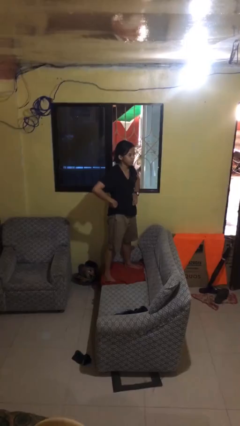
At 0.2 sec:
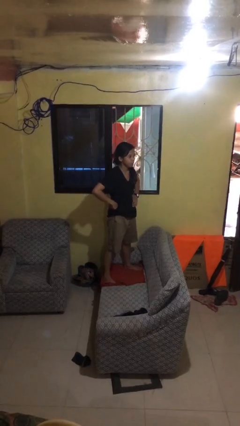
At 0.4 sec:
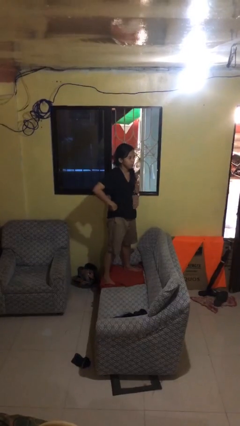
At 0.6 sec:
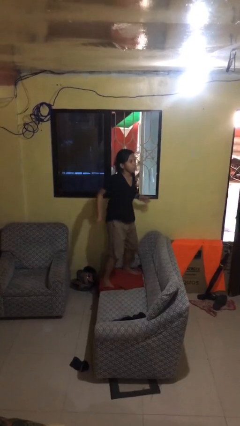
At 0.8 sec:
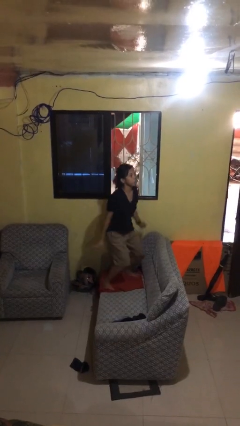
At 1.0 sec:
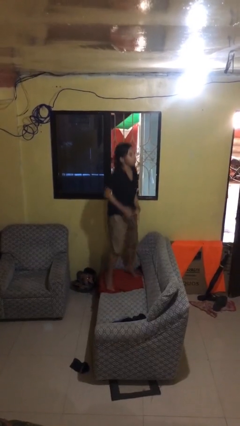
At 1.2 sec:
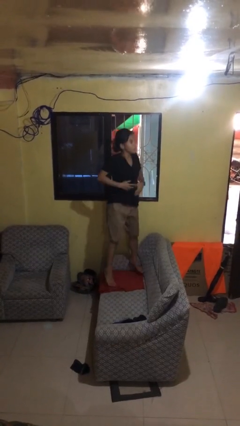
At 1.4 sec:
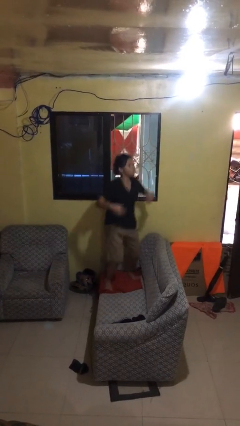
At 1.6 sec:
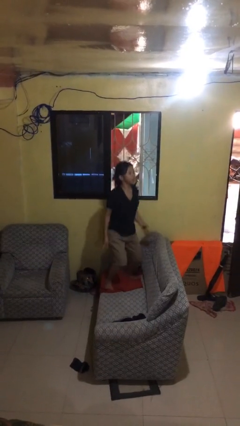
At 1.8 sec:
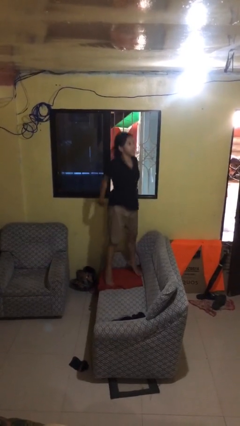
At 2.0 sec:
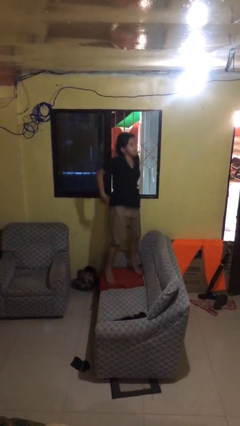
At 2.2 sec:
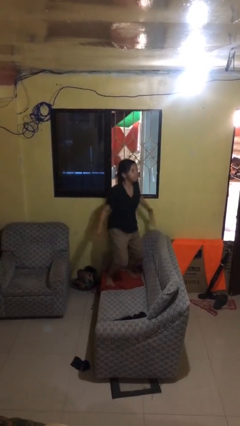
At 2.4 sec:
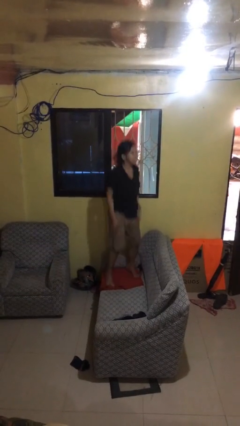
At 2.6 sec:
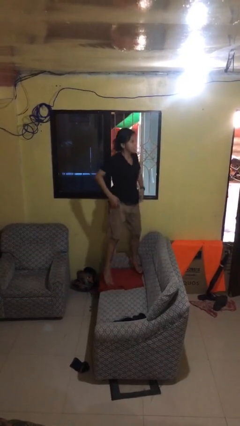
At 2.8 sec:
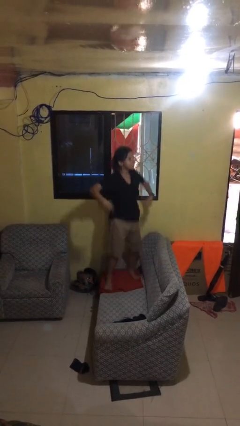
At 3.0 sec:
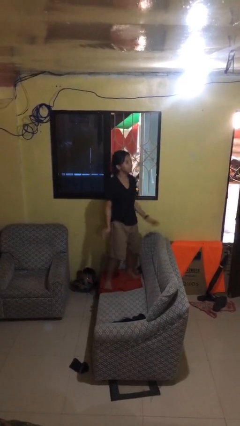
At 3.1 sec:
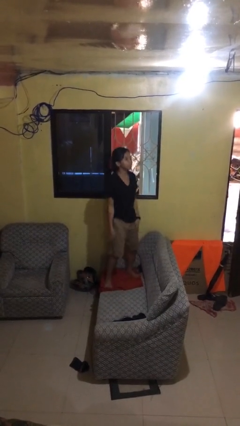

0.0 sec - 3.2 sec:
person jumps on couch

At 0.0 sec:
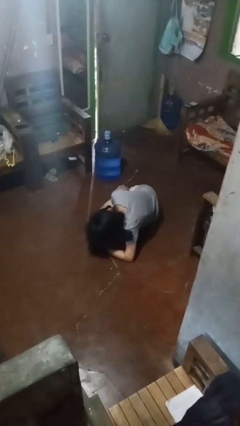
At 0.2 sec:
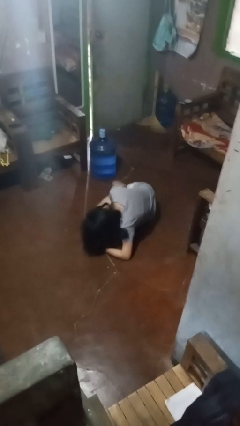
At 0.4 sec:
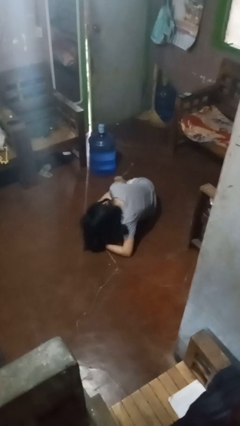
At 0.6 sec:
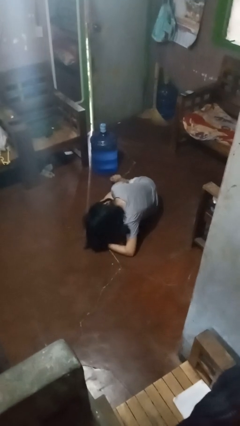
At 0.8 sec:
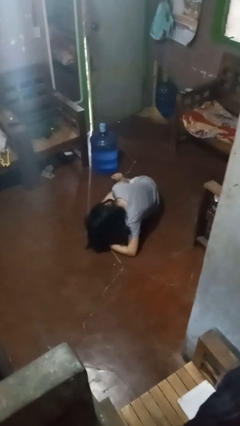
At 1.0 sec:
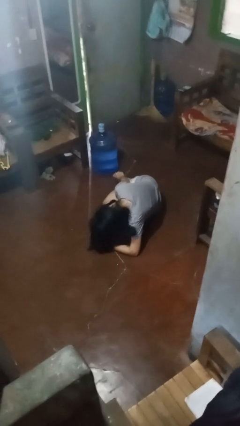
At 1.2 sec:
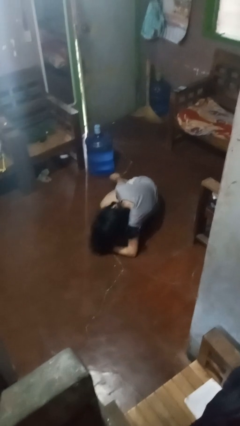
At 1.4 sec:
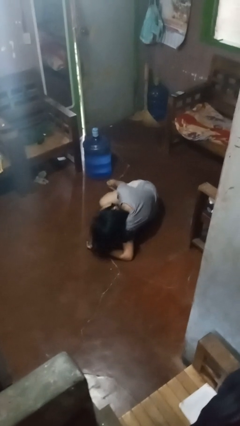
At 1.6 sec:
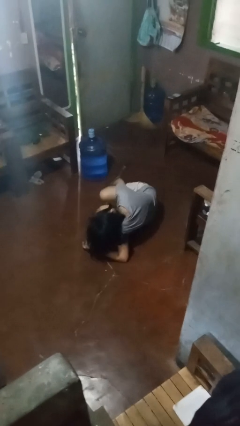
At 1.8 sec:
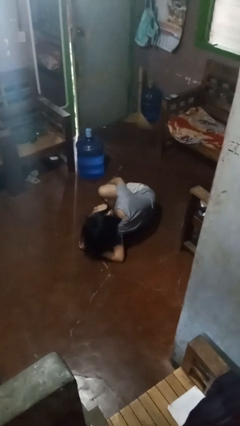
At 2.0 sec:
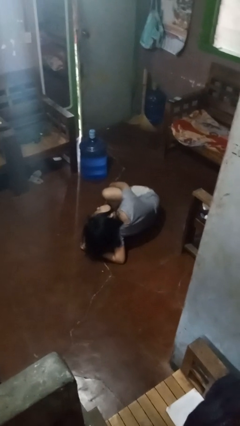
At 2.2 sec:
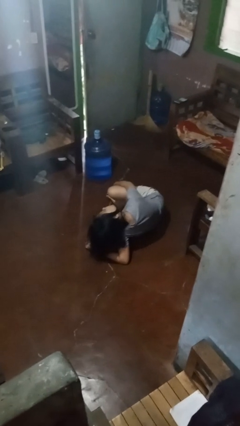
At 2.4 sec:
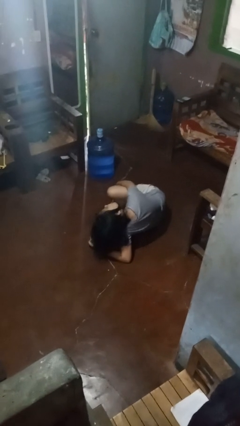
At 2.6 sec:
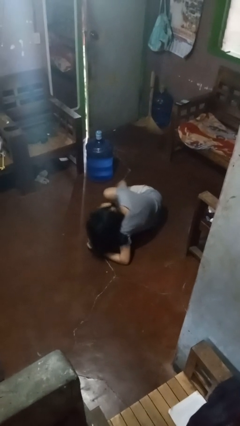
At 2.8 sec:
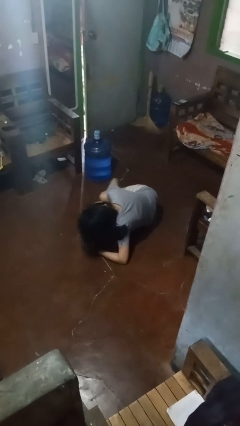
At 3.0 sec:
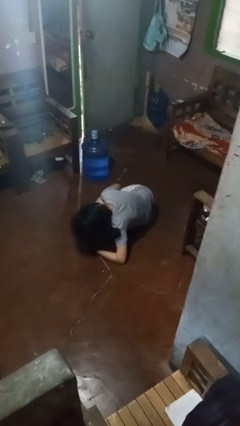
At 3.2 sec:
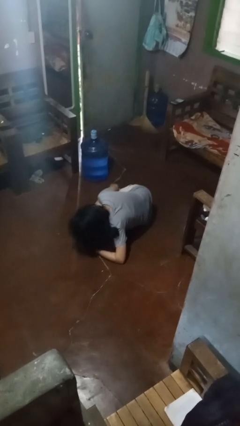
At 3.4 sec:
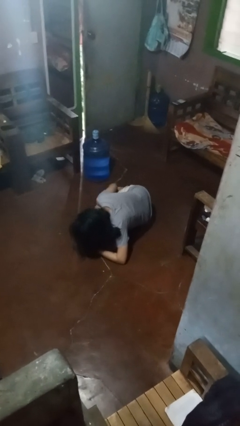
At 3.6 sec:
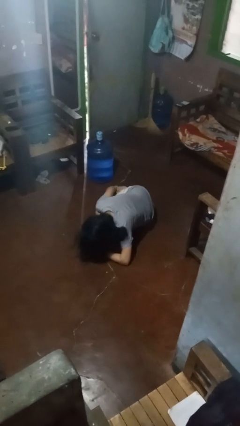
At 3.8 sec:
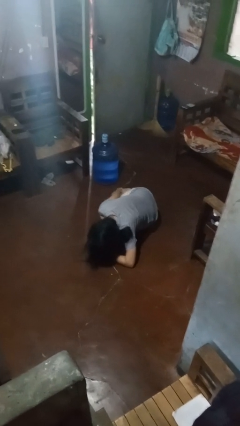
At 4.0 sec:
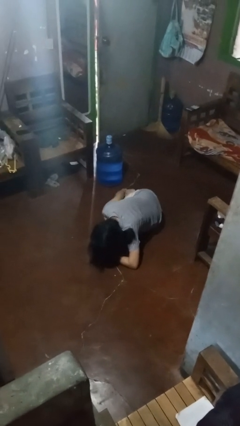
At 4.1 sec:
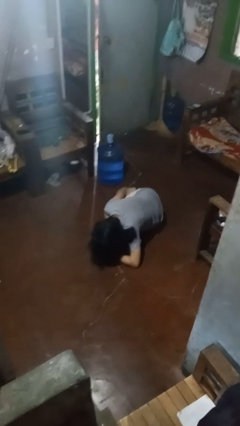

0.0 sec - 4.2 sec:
person lies down on floor

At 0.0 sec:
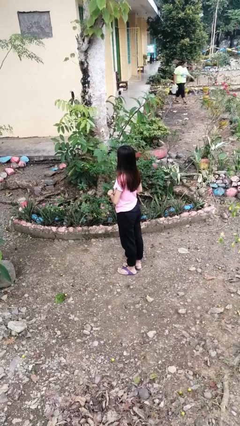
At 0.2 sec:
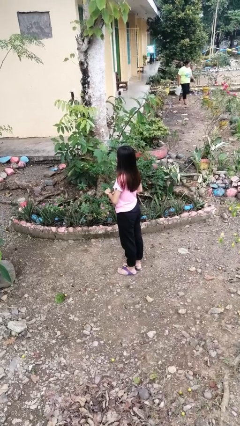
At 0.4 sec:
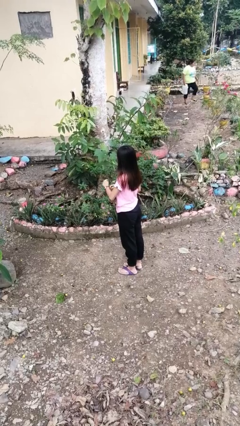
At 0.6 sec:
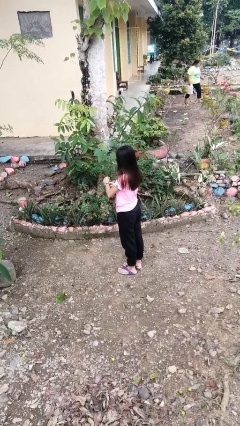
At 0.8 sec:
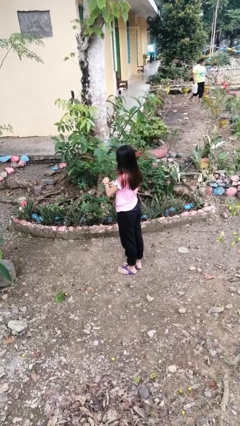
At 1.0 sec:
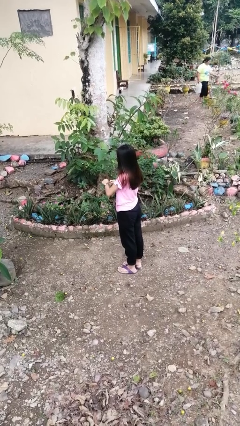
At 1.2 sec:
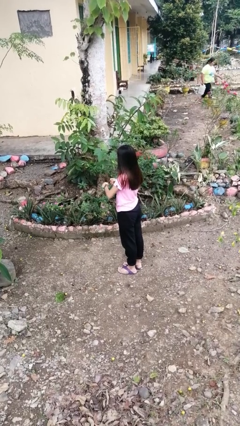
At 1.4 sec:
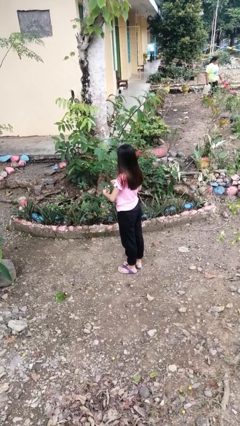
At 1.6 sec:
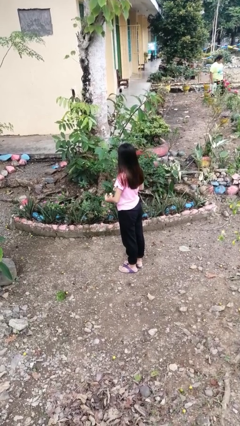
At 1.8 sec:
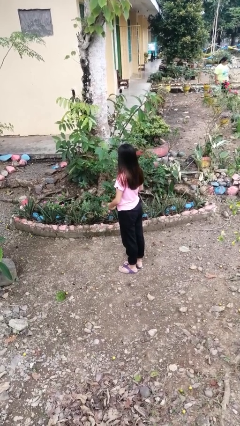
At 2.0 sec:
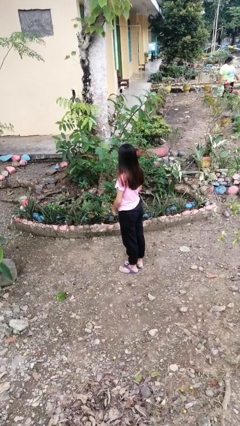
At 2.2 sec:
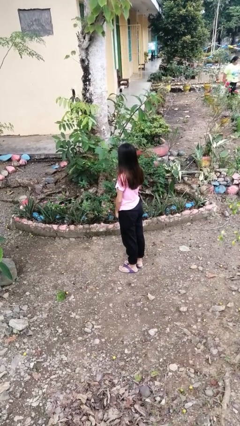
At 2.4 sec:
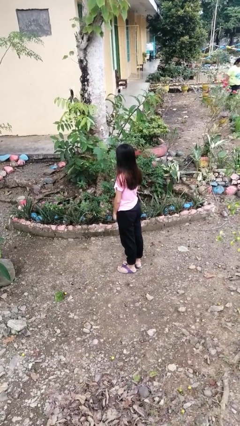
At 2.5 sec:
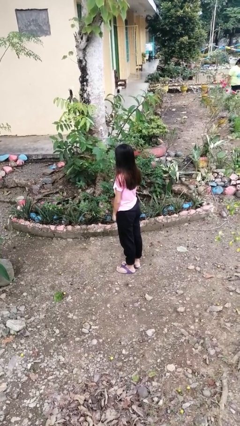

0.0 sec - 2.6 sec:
person takes off wristwatch

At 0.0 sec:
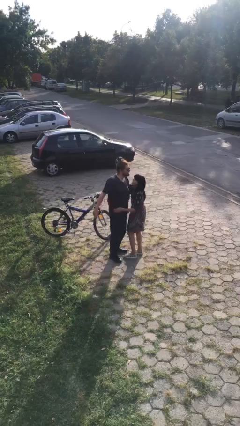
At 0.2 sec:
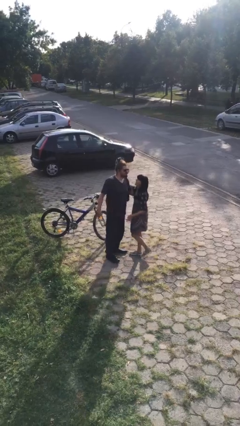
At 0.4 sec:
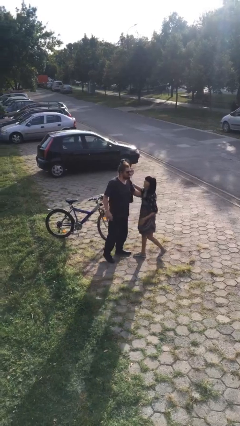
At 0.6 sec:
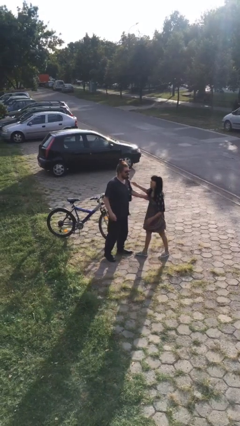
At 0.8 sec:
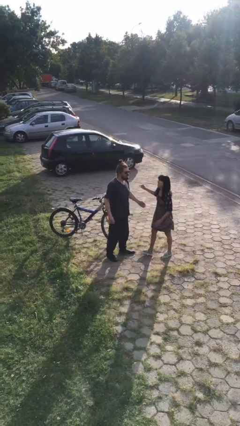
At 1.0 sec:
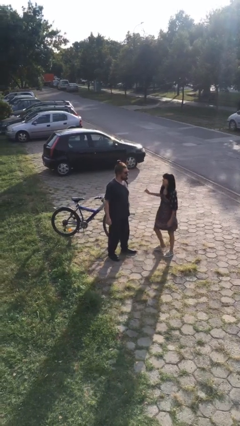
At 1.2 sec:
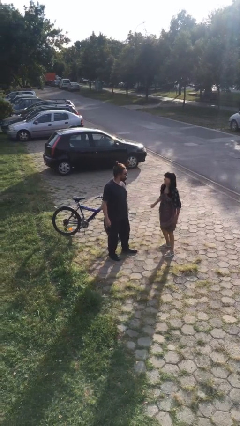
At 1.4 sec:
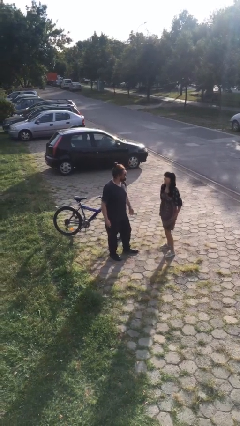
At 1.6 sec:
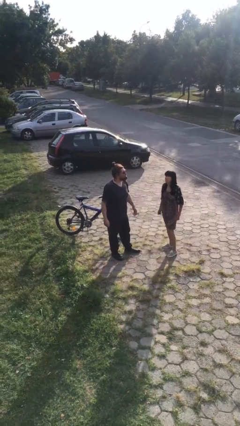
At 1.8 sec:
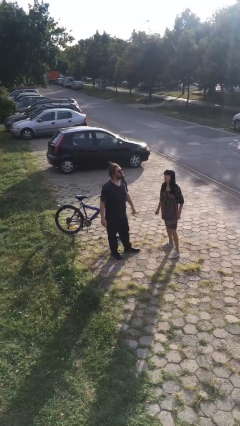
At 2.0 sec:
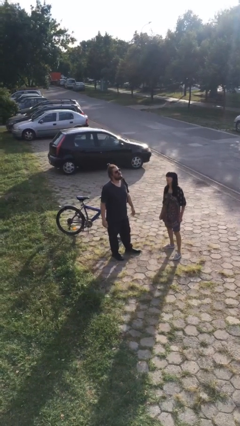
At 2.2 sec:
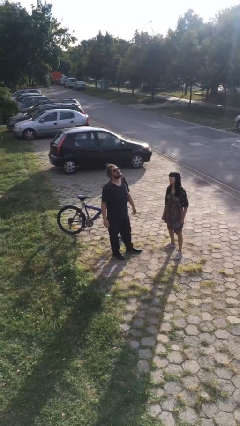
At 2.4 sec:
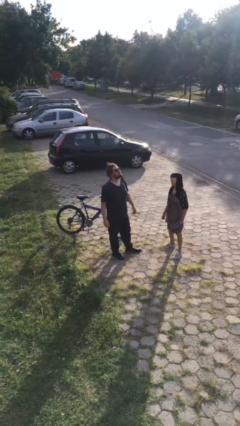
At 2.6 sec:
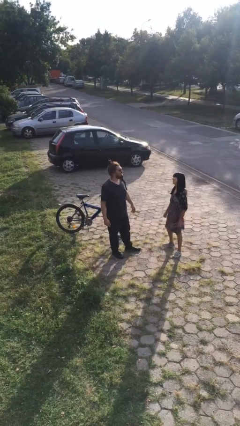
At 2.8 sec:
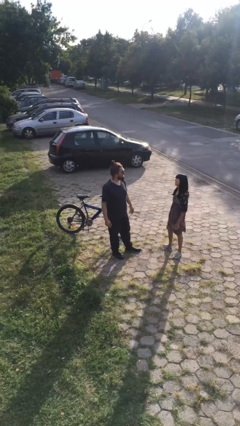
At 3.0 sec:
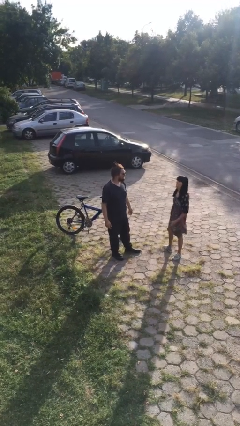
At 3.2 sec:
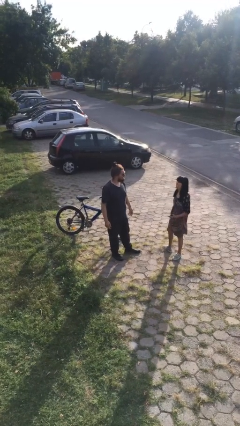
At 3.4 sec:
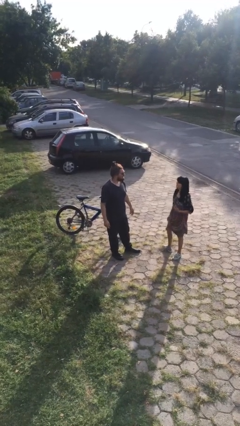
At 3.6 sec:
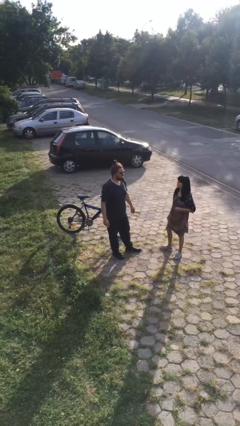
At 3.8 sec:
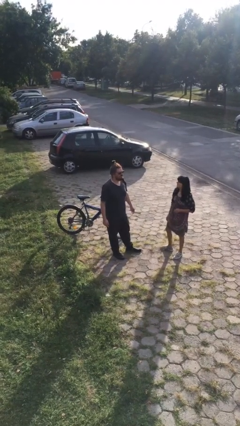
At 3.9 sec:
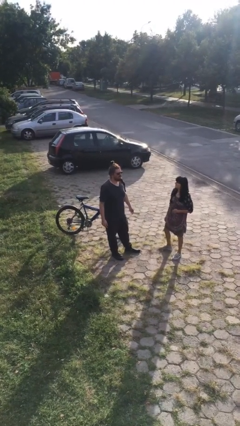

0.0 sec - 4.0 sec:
person talks to person

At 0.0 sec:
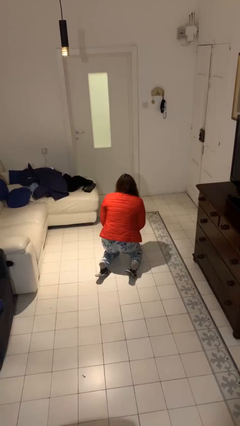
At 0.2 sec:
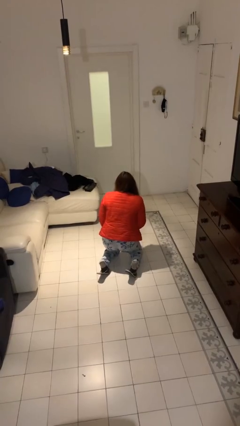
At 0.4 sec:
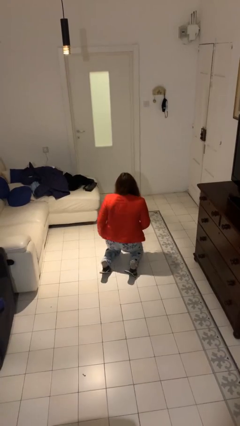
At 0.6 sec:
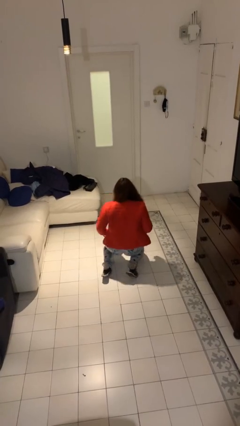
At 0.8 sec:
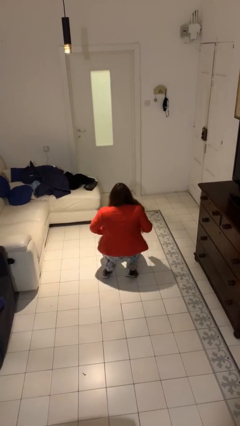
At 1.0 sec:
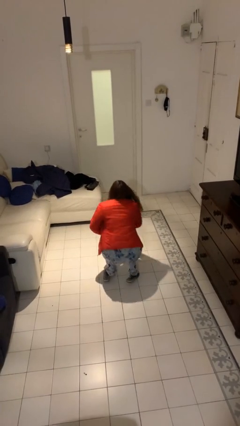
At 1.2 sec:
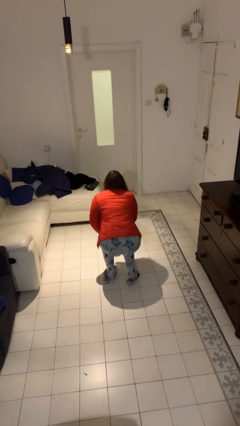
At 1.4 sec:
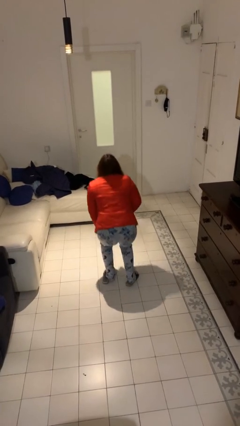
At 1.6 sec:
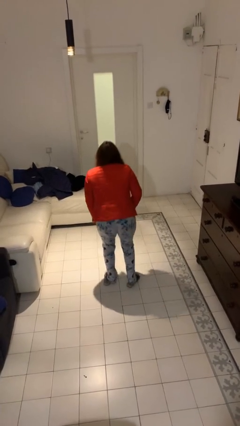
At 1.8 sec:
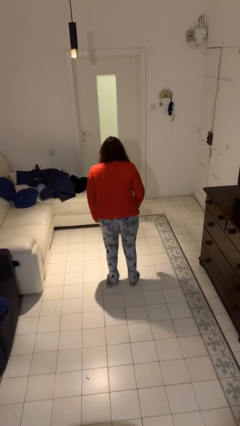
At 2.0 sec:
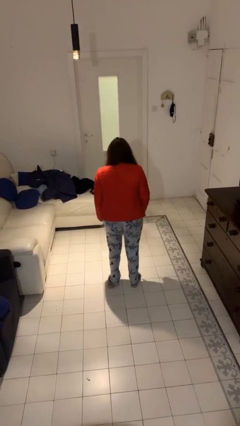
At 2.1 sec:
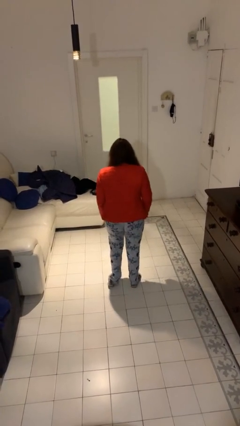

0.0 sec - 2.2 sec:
person stands up from floor

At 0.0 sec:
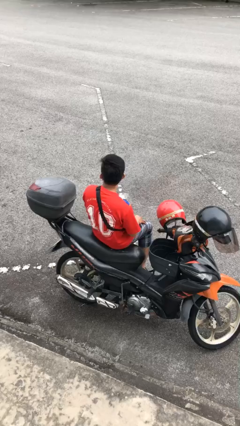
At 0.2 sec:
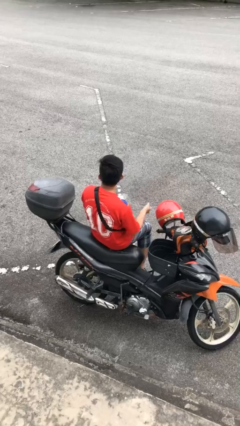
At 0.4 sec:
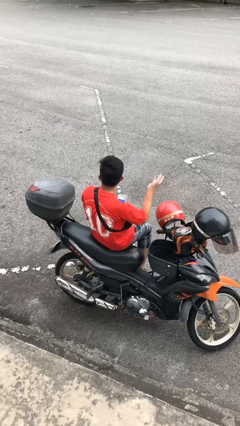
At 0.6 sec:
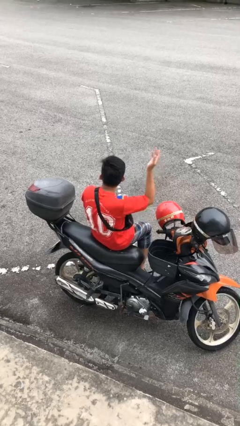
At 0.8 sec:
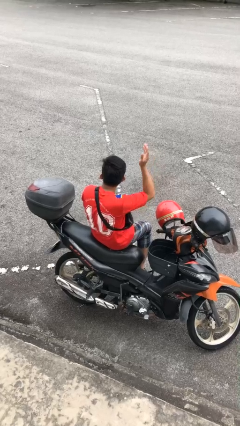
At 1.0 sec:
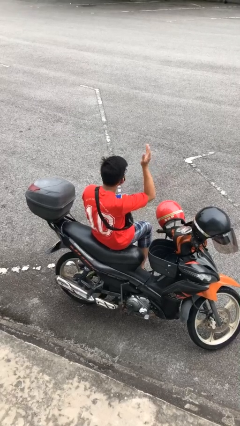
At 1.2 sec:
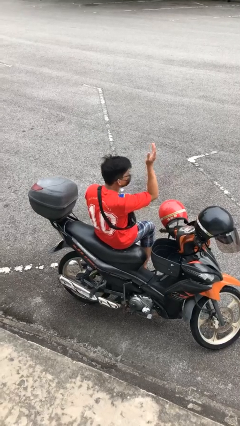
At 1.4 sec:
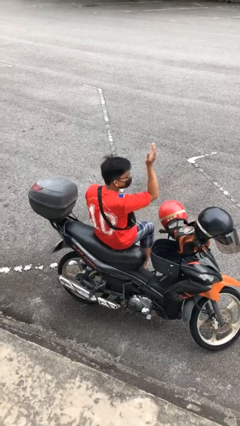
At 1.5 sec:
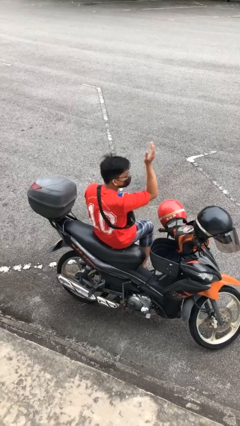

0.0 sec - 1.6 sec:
person gestures swipe up
